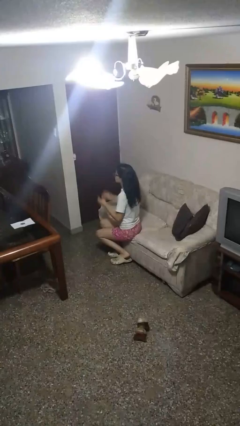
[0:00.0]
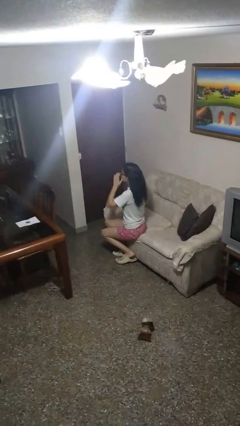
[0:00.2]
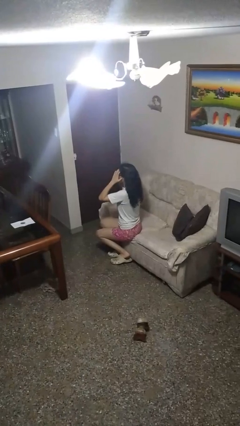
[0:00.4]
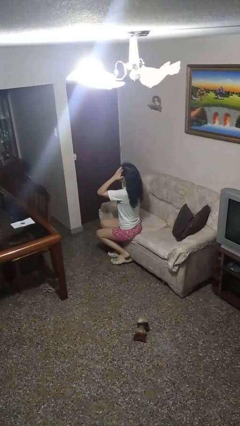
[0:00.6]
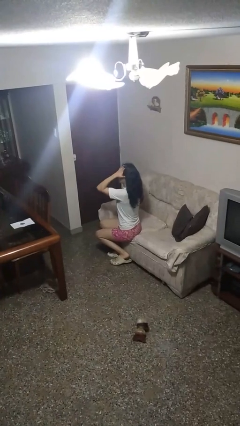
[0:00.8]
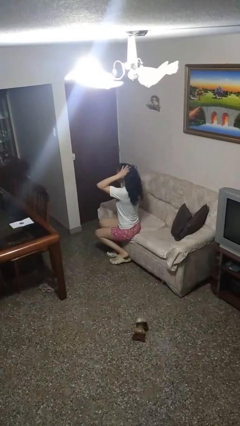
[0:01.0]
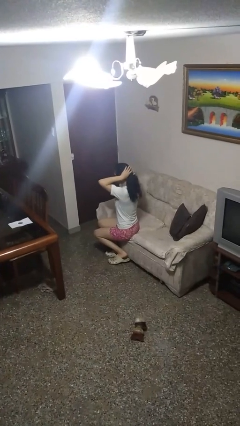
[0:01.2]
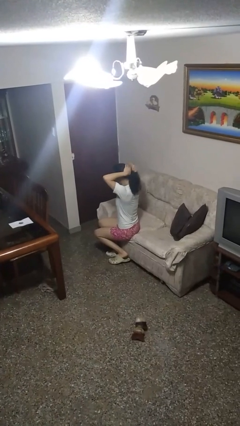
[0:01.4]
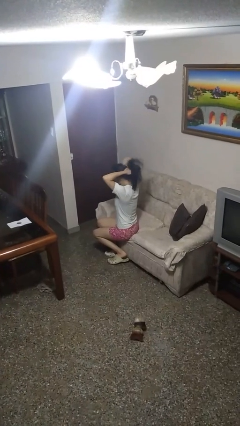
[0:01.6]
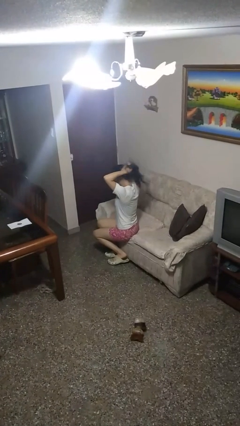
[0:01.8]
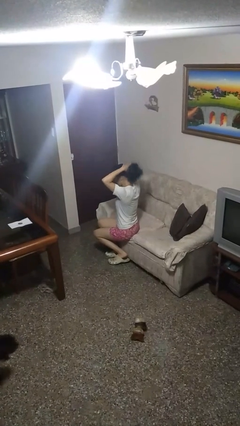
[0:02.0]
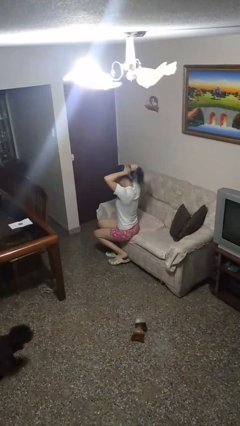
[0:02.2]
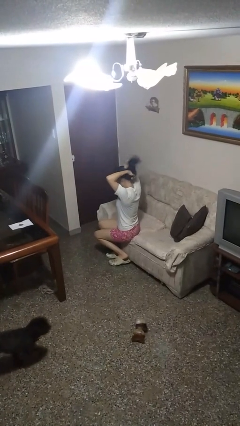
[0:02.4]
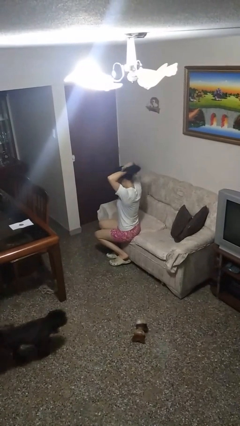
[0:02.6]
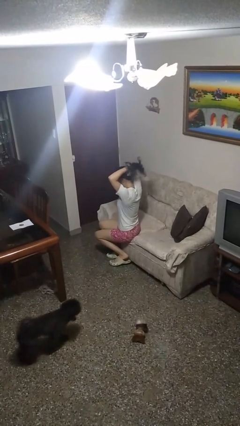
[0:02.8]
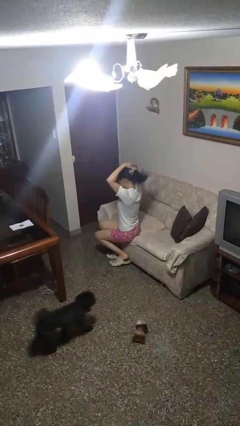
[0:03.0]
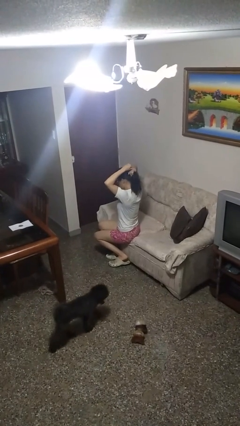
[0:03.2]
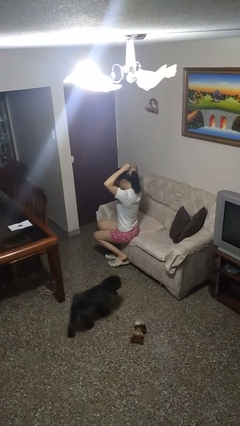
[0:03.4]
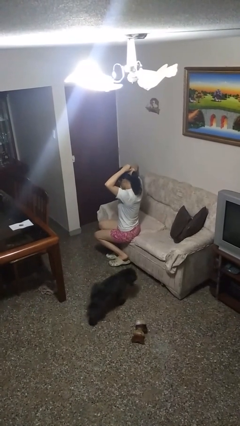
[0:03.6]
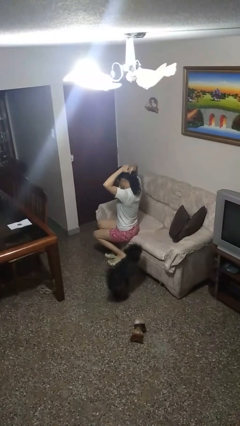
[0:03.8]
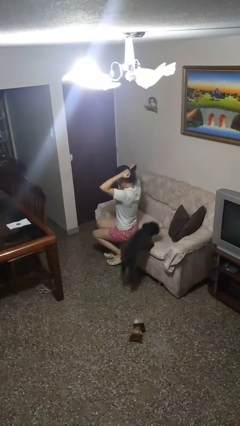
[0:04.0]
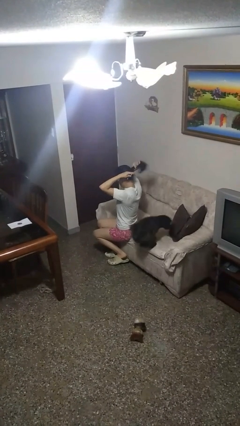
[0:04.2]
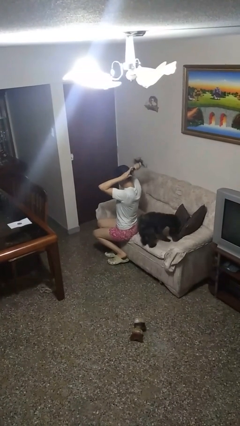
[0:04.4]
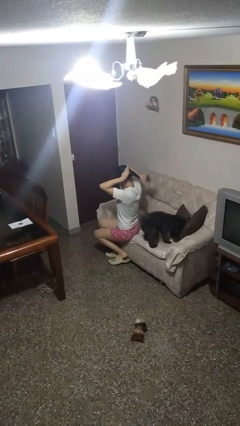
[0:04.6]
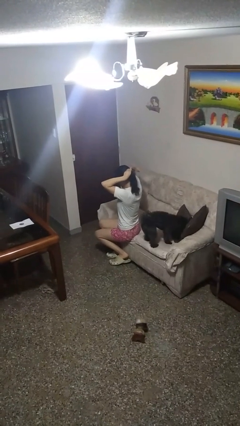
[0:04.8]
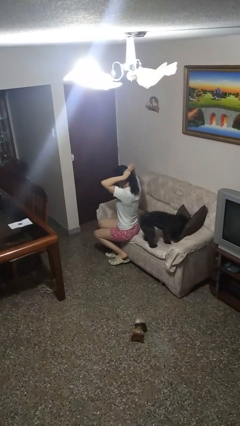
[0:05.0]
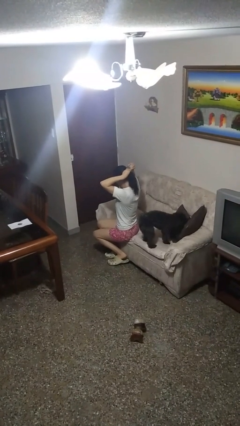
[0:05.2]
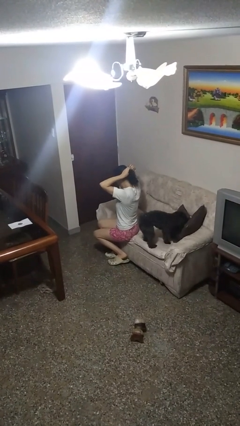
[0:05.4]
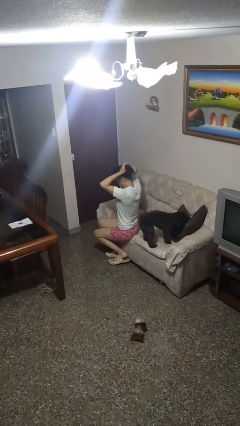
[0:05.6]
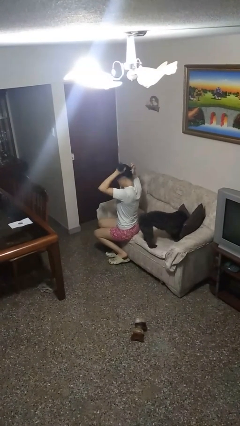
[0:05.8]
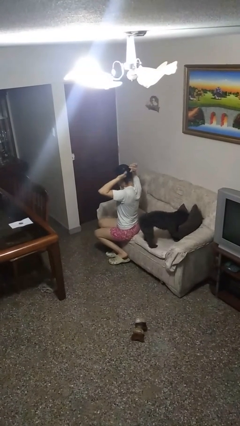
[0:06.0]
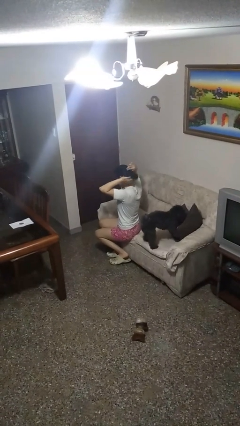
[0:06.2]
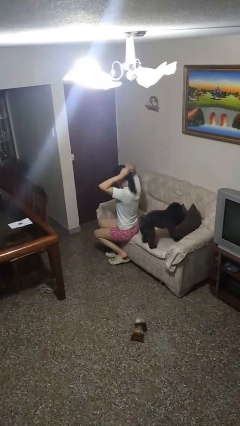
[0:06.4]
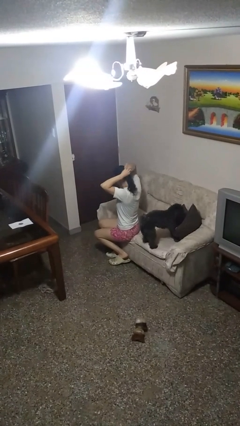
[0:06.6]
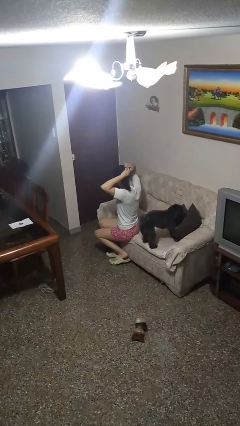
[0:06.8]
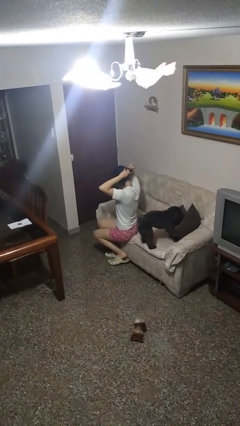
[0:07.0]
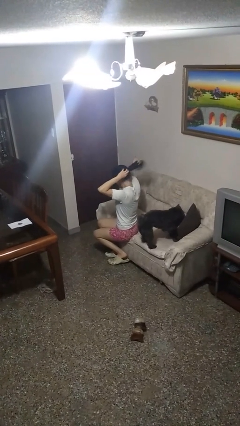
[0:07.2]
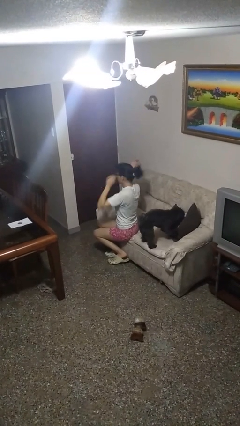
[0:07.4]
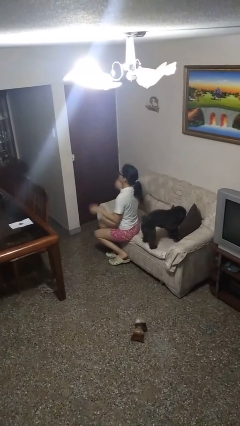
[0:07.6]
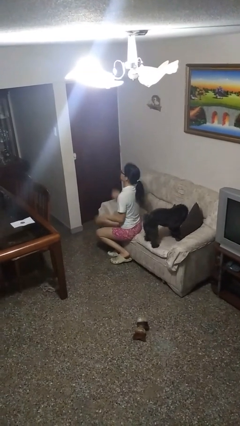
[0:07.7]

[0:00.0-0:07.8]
person puts hair in ponytail

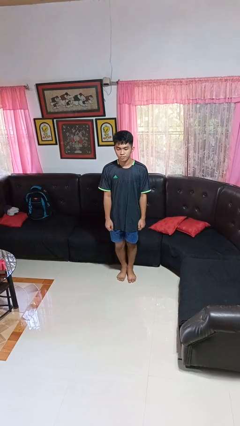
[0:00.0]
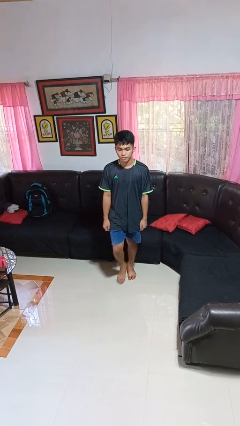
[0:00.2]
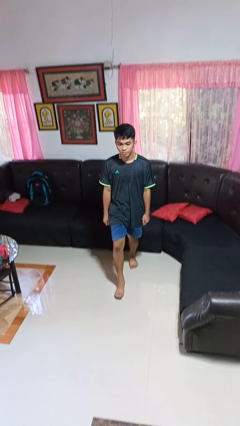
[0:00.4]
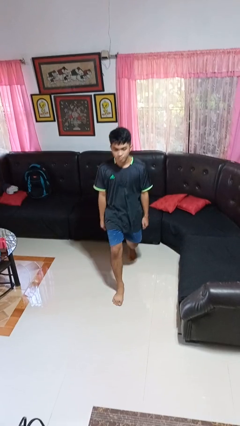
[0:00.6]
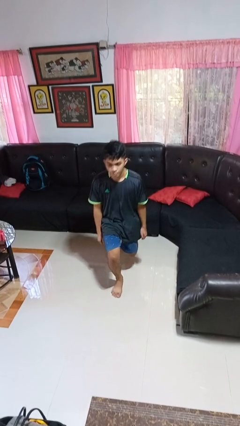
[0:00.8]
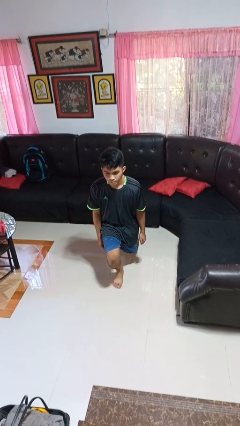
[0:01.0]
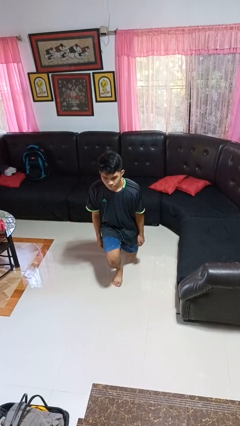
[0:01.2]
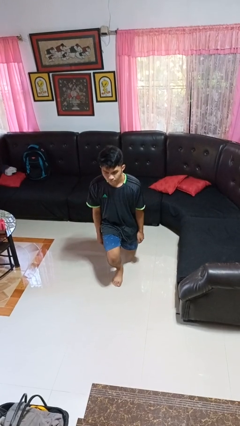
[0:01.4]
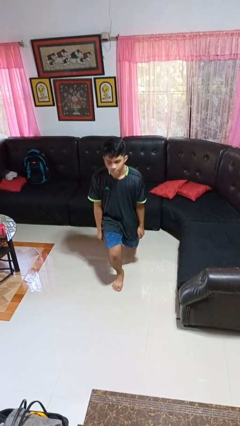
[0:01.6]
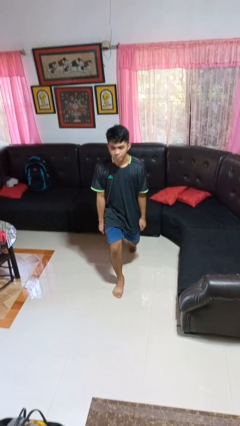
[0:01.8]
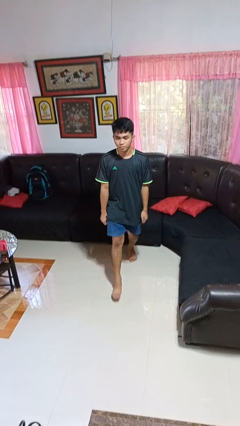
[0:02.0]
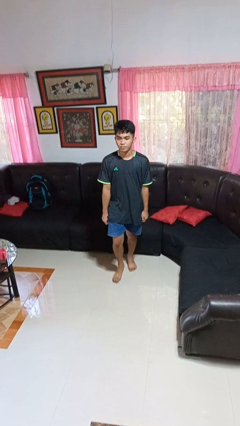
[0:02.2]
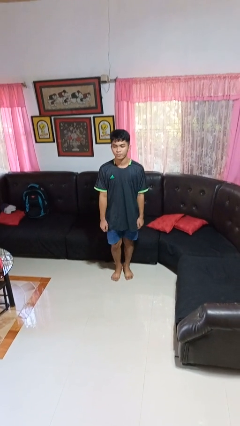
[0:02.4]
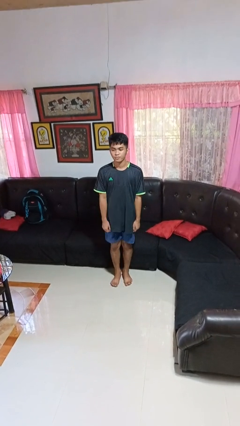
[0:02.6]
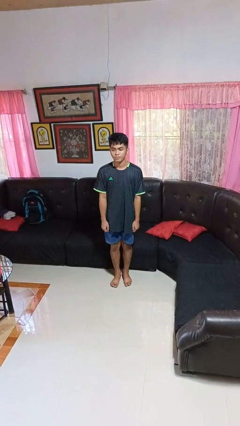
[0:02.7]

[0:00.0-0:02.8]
person exercises with lunges

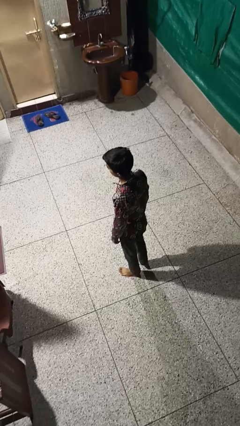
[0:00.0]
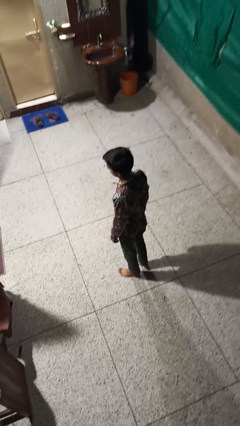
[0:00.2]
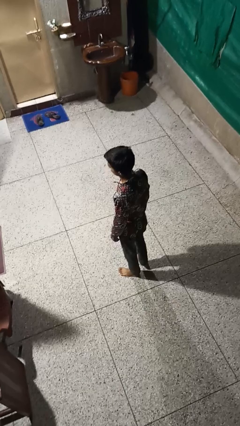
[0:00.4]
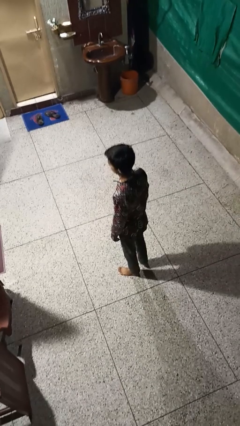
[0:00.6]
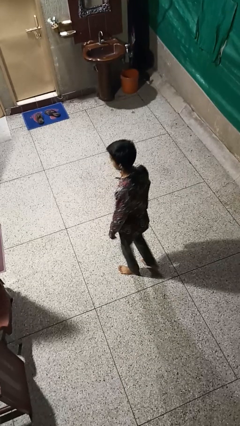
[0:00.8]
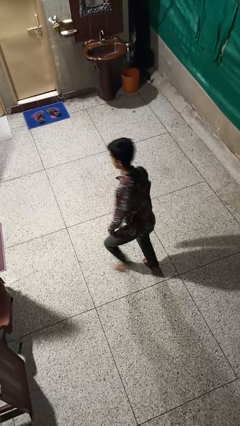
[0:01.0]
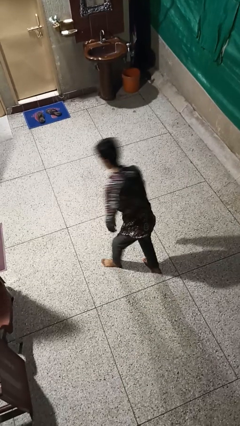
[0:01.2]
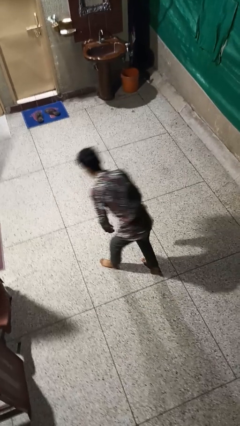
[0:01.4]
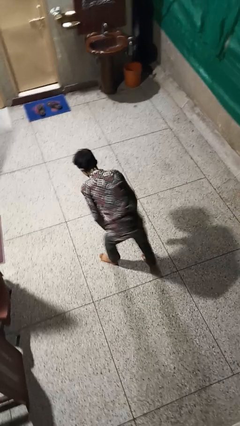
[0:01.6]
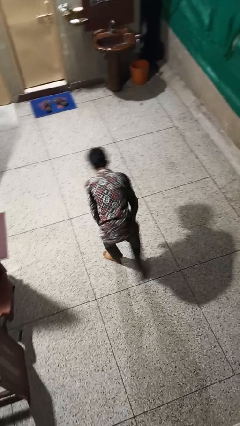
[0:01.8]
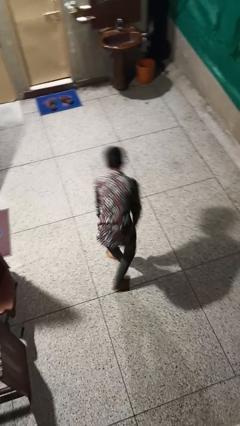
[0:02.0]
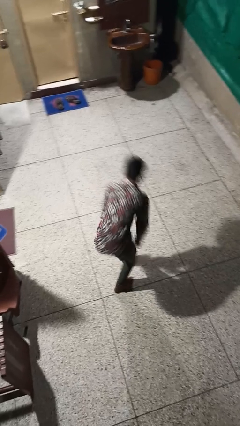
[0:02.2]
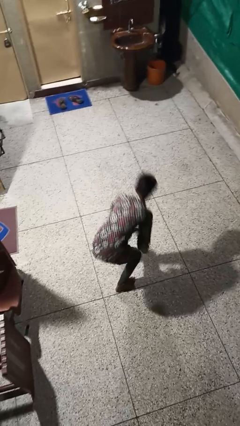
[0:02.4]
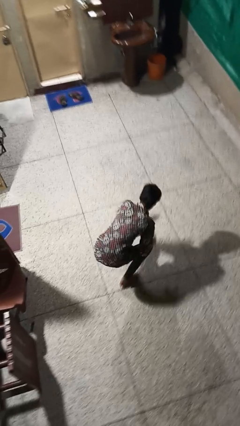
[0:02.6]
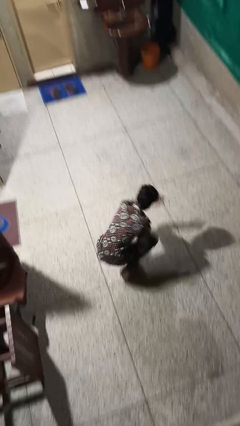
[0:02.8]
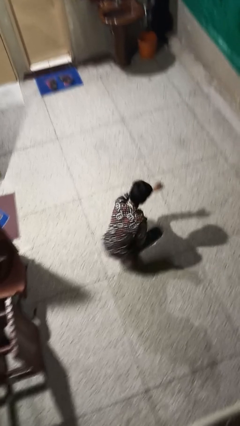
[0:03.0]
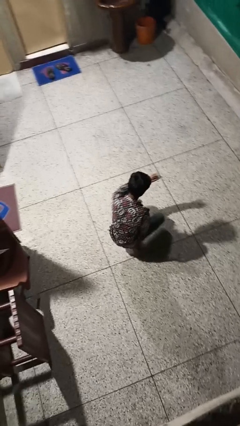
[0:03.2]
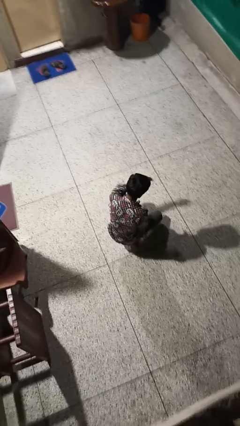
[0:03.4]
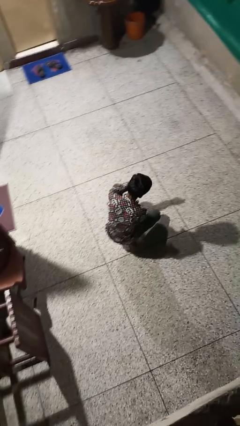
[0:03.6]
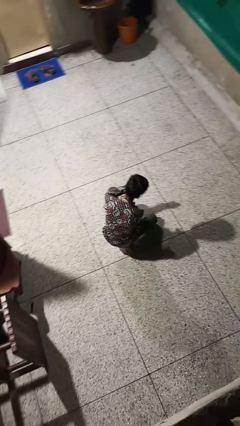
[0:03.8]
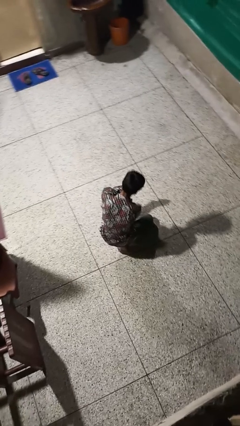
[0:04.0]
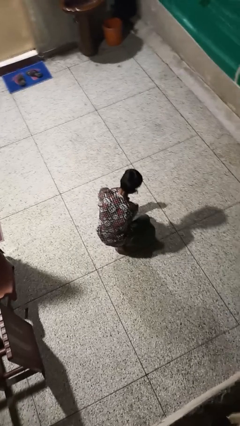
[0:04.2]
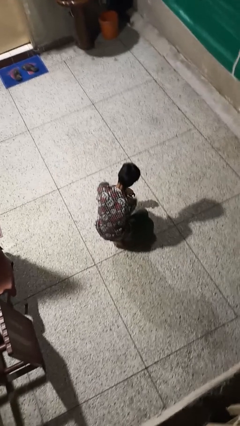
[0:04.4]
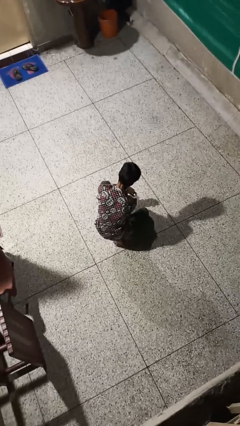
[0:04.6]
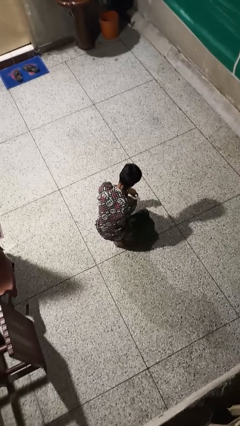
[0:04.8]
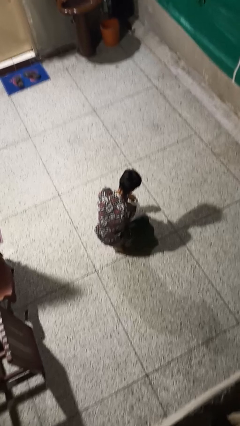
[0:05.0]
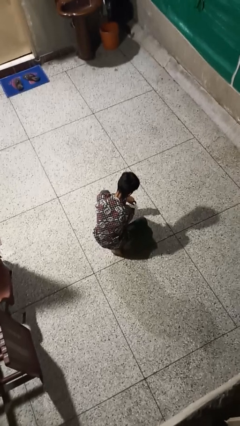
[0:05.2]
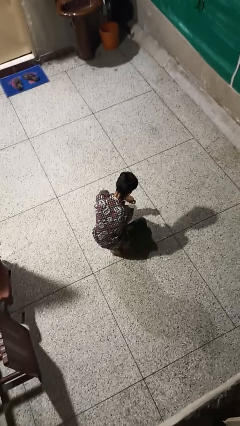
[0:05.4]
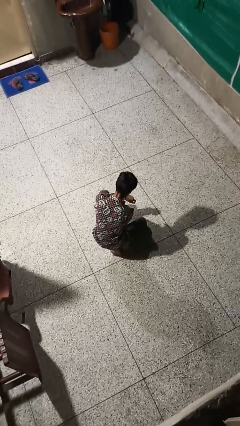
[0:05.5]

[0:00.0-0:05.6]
person kneels

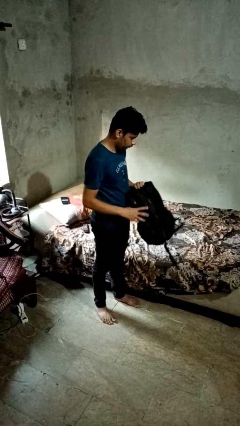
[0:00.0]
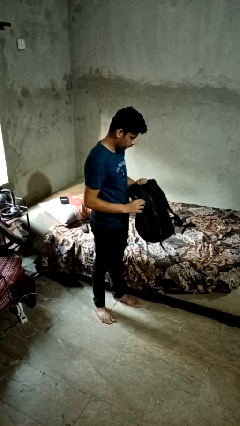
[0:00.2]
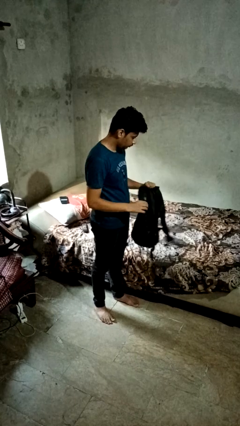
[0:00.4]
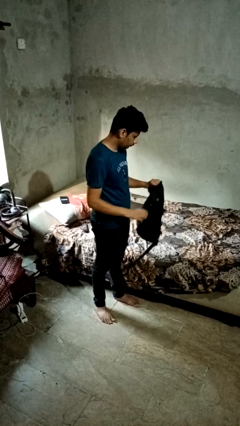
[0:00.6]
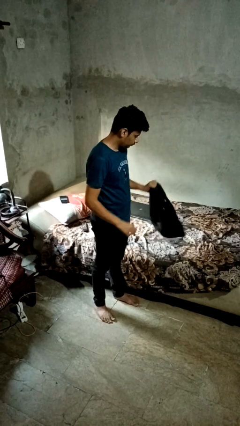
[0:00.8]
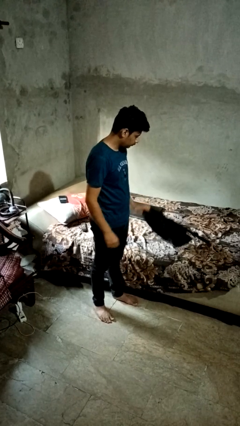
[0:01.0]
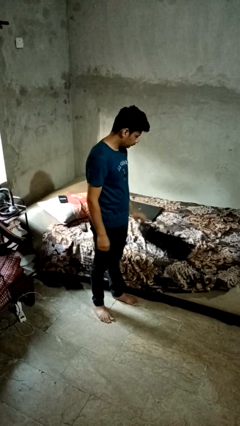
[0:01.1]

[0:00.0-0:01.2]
person puts down object on bed

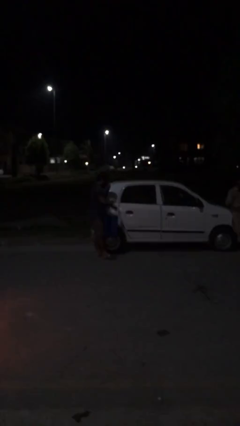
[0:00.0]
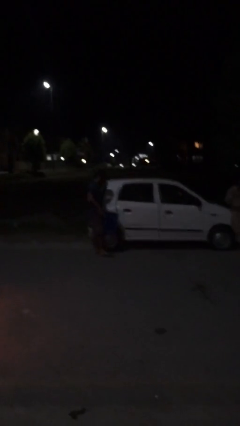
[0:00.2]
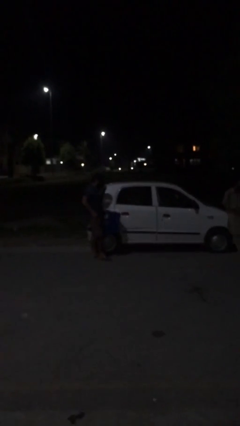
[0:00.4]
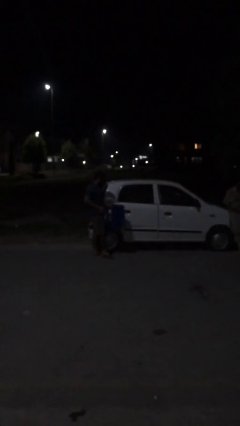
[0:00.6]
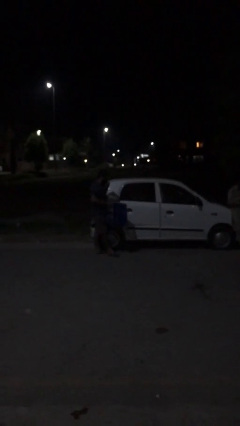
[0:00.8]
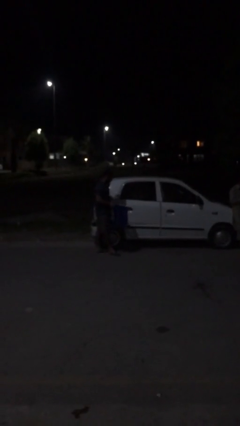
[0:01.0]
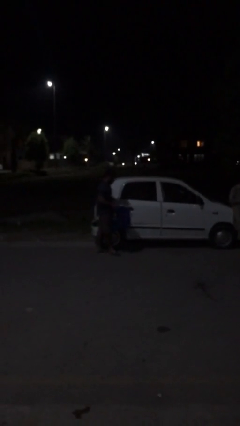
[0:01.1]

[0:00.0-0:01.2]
person closes car door
